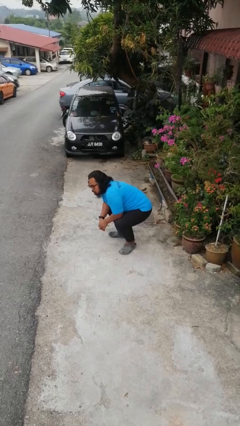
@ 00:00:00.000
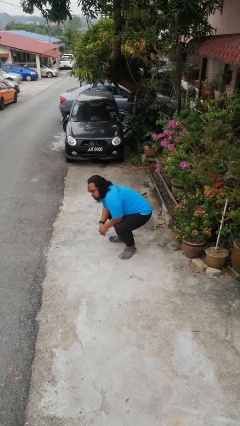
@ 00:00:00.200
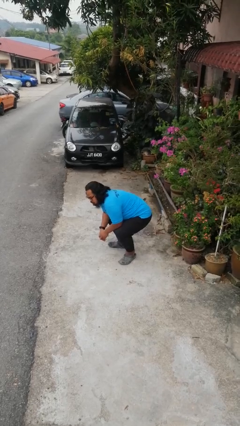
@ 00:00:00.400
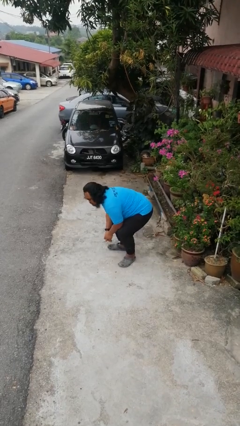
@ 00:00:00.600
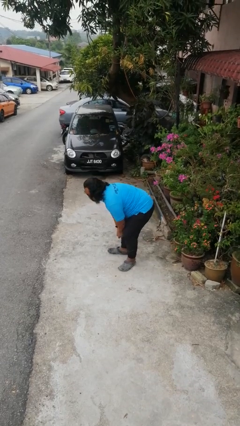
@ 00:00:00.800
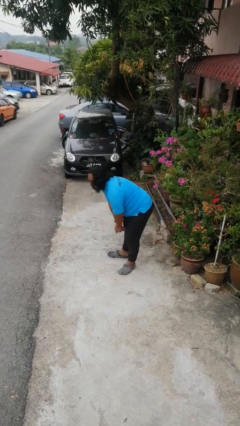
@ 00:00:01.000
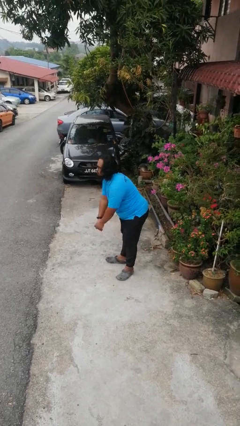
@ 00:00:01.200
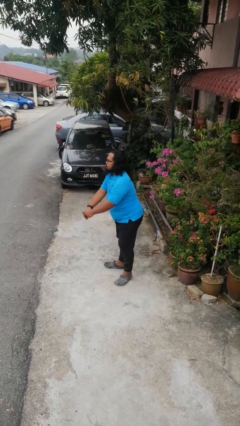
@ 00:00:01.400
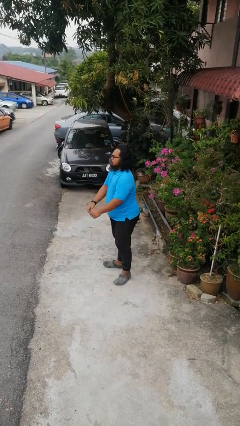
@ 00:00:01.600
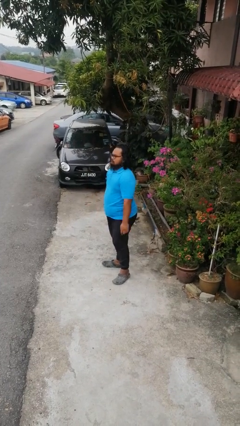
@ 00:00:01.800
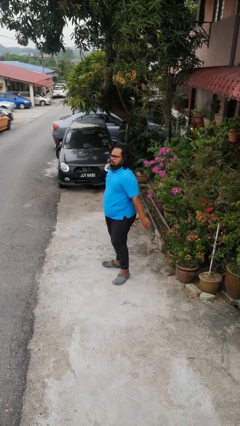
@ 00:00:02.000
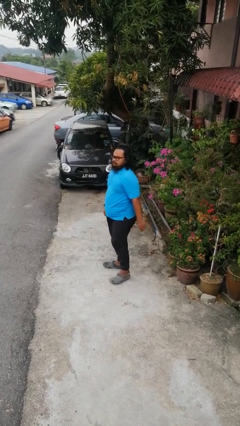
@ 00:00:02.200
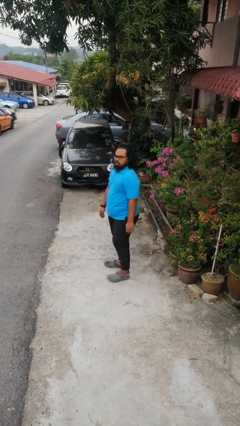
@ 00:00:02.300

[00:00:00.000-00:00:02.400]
person stands up

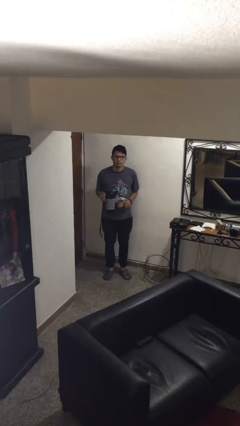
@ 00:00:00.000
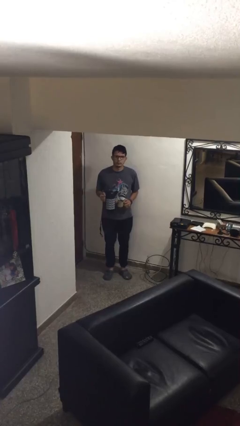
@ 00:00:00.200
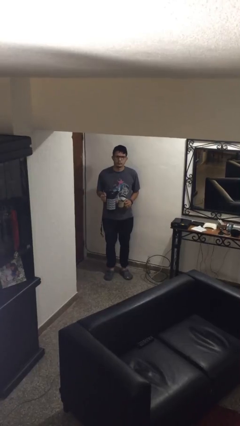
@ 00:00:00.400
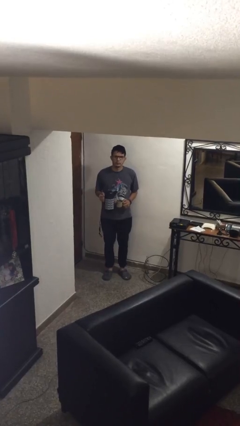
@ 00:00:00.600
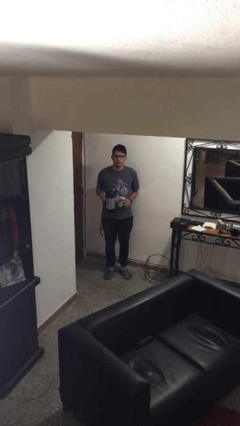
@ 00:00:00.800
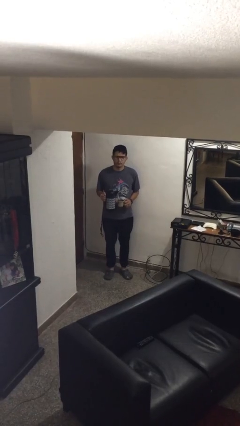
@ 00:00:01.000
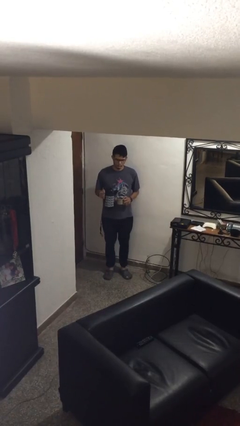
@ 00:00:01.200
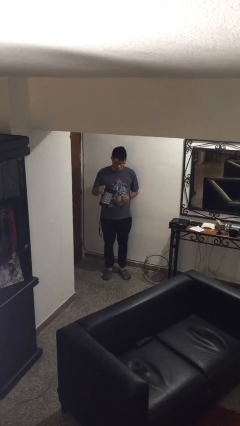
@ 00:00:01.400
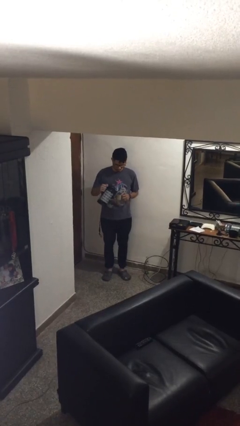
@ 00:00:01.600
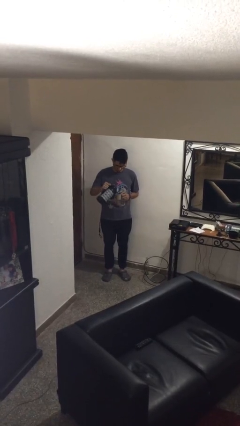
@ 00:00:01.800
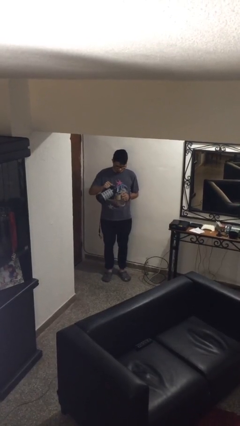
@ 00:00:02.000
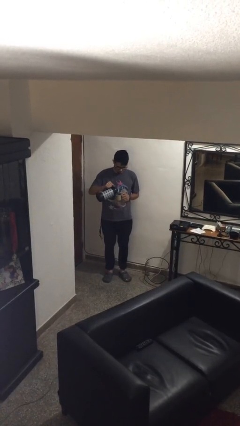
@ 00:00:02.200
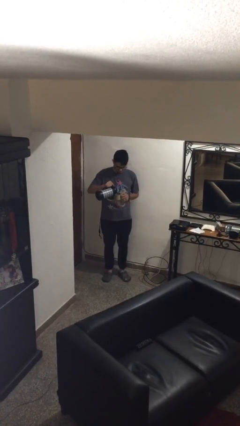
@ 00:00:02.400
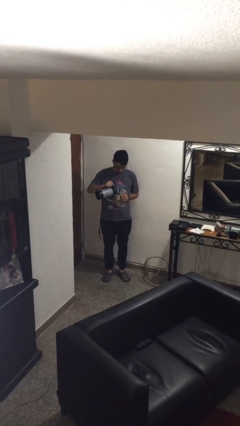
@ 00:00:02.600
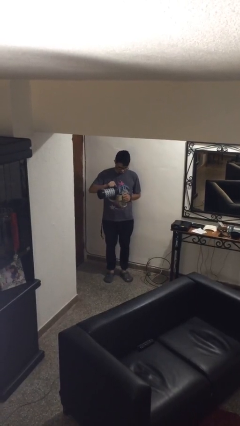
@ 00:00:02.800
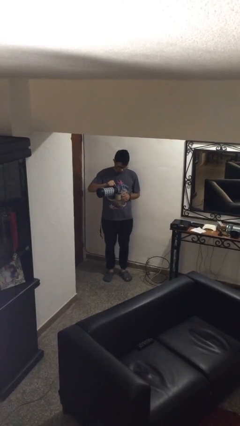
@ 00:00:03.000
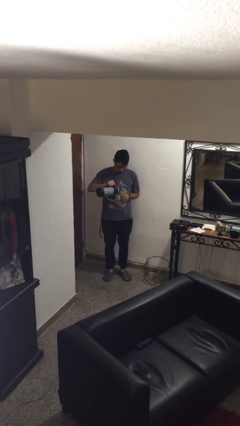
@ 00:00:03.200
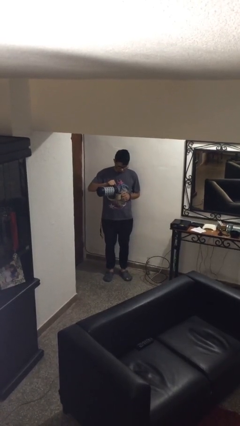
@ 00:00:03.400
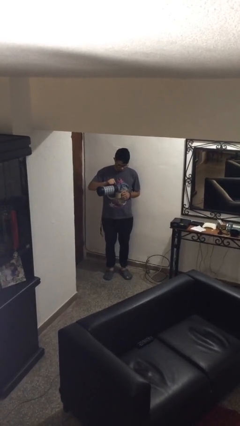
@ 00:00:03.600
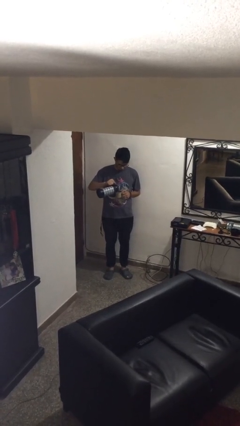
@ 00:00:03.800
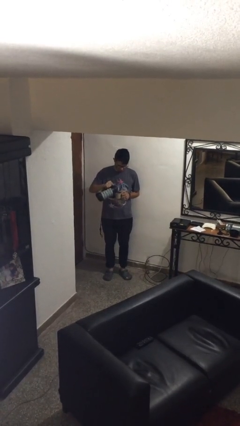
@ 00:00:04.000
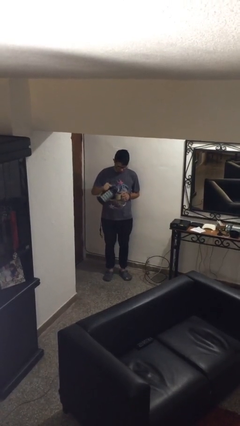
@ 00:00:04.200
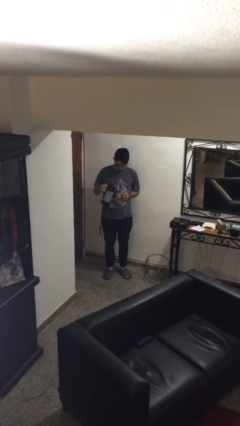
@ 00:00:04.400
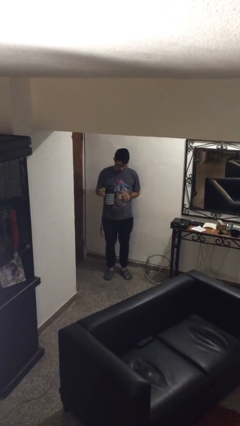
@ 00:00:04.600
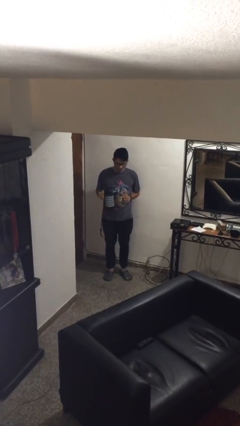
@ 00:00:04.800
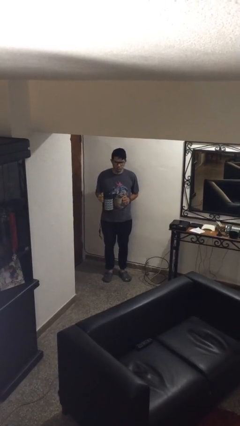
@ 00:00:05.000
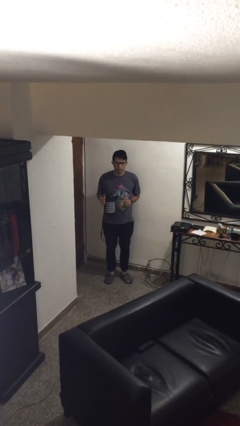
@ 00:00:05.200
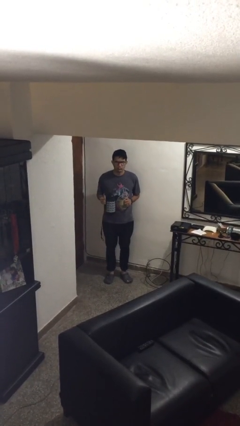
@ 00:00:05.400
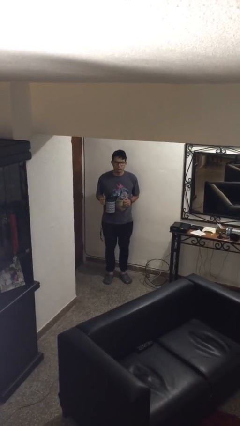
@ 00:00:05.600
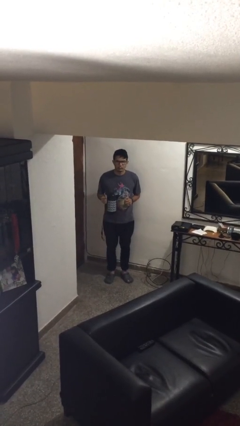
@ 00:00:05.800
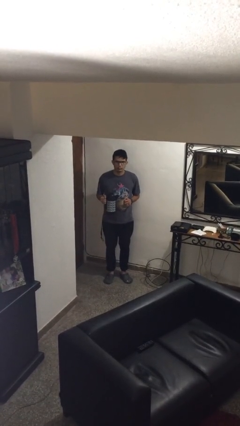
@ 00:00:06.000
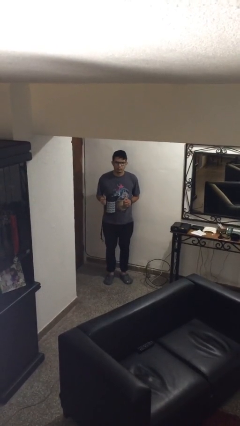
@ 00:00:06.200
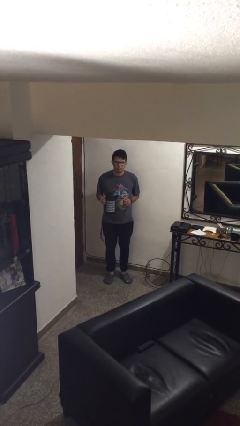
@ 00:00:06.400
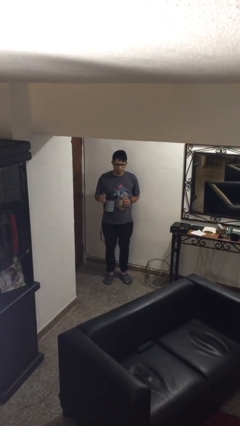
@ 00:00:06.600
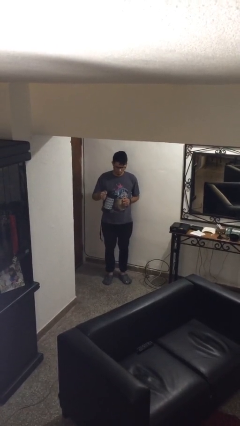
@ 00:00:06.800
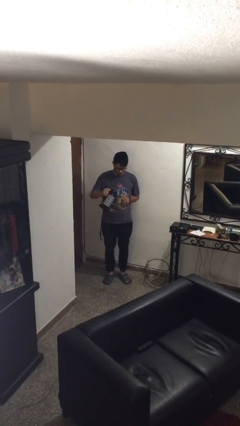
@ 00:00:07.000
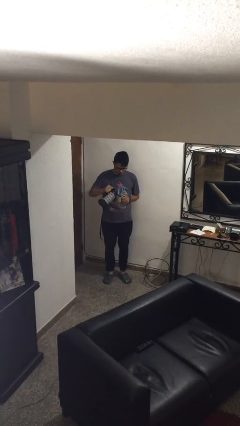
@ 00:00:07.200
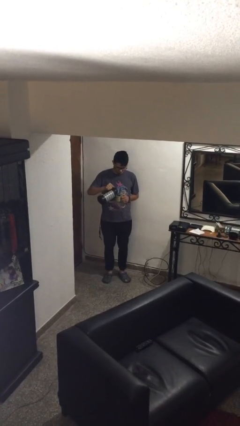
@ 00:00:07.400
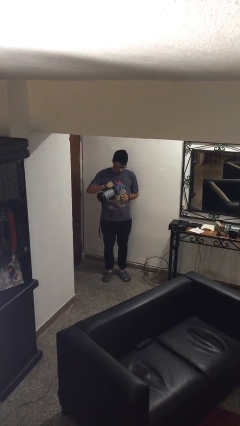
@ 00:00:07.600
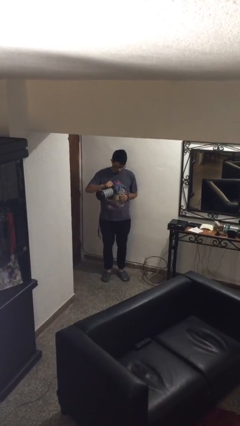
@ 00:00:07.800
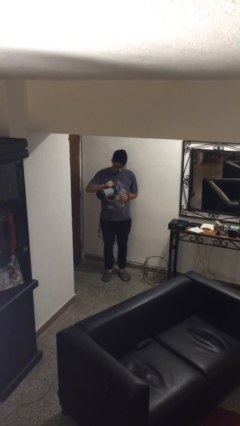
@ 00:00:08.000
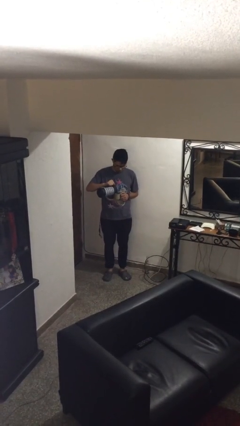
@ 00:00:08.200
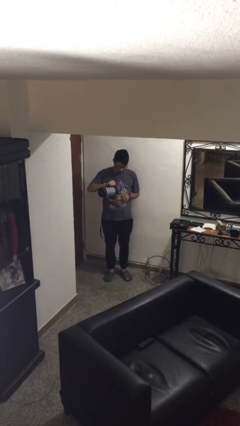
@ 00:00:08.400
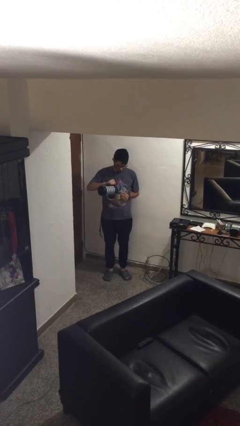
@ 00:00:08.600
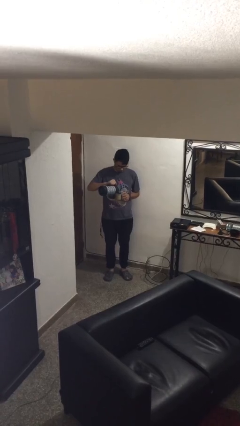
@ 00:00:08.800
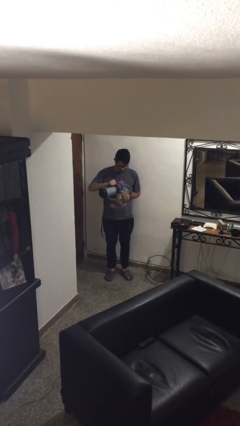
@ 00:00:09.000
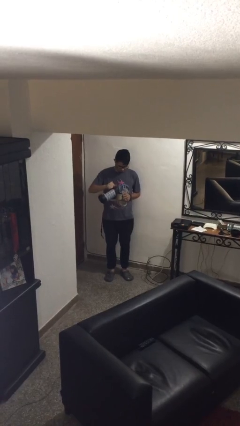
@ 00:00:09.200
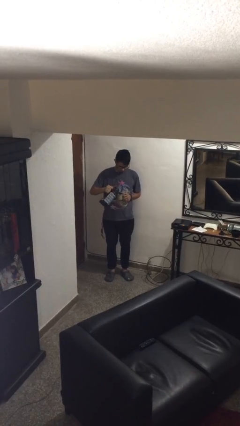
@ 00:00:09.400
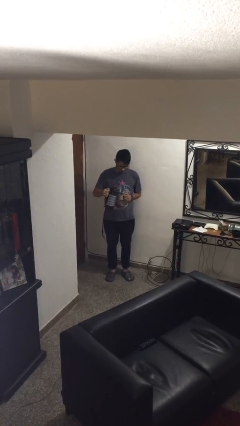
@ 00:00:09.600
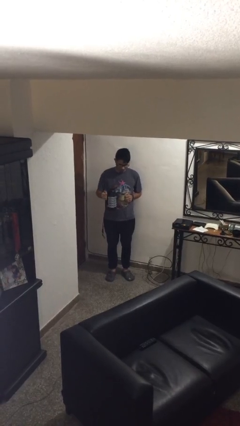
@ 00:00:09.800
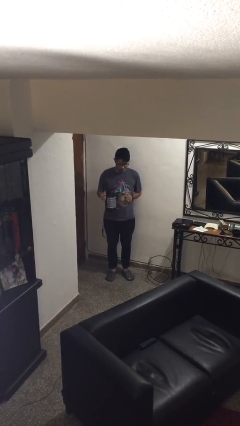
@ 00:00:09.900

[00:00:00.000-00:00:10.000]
person pours coffee into mug

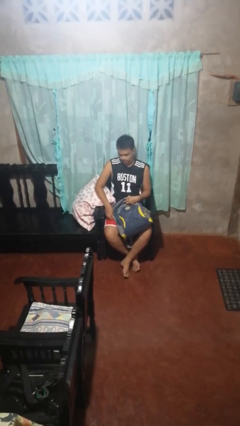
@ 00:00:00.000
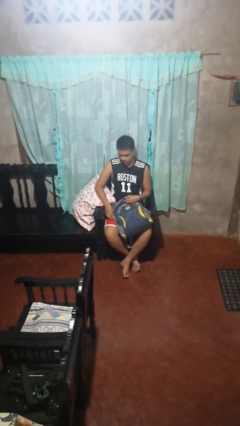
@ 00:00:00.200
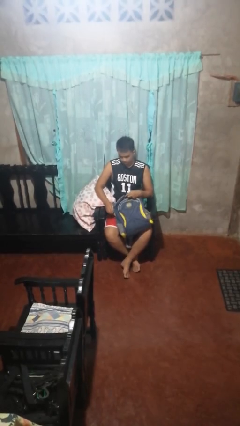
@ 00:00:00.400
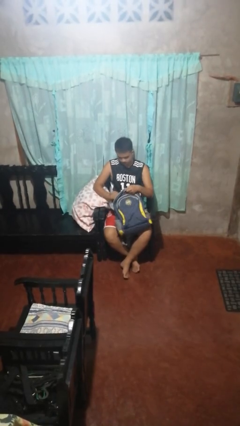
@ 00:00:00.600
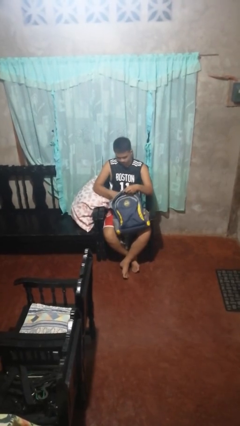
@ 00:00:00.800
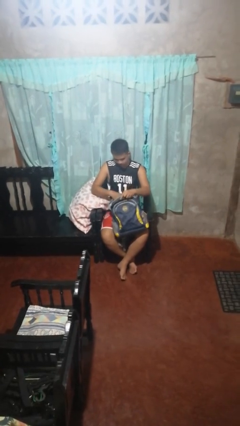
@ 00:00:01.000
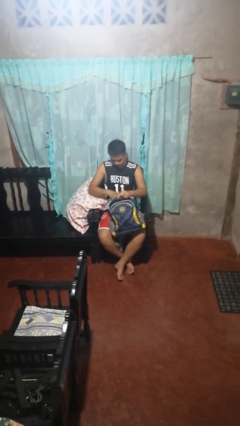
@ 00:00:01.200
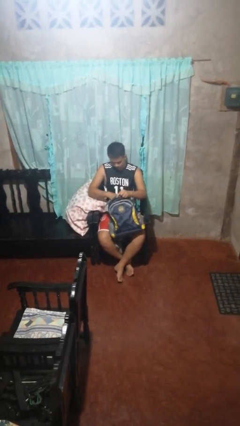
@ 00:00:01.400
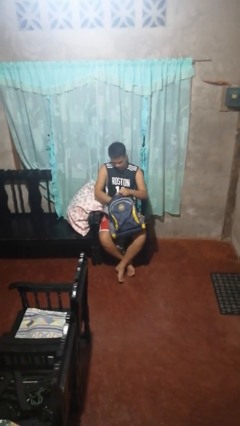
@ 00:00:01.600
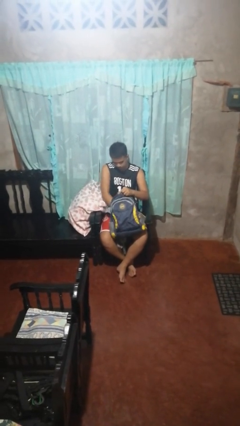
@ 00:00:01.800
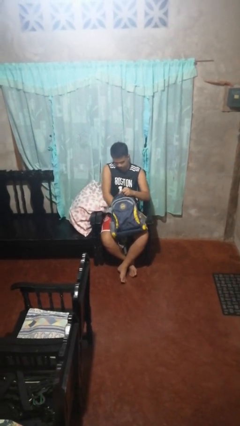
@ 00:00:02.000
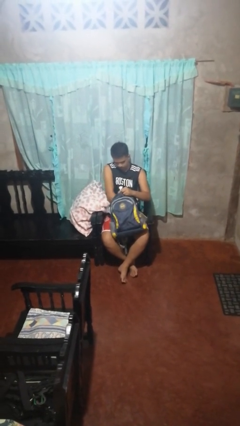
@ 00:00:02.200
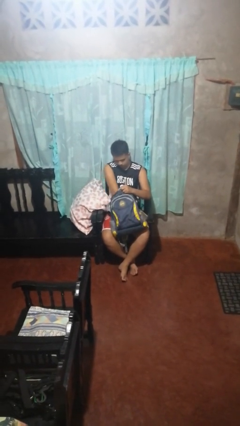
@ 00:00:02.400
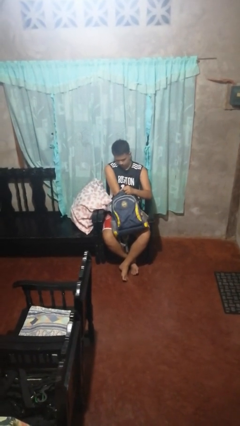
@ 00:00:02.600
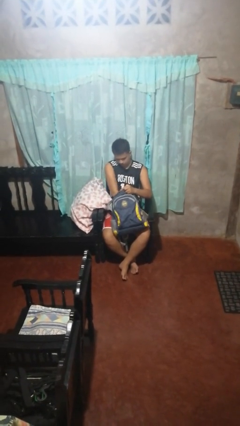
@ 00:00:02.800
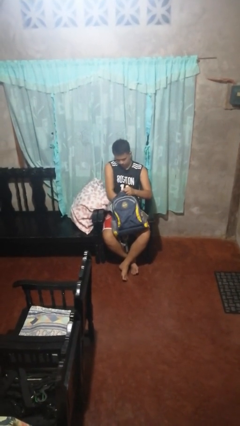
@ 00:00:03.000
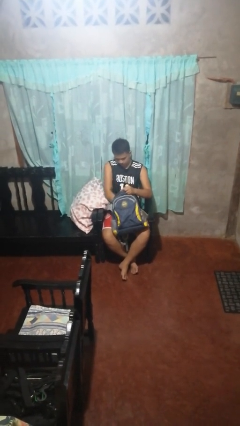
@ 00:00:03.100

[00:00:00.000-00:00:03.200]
person searches in backpack

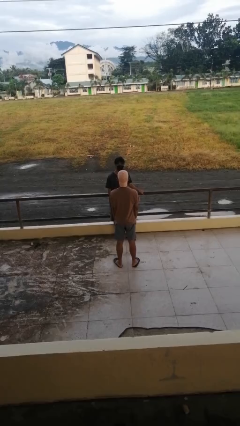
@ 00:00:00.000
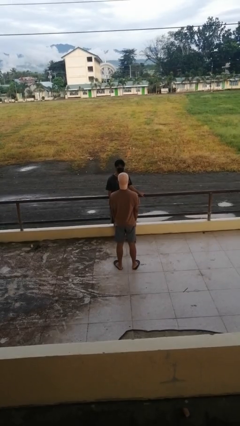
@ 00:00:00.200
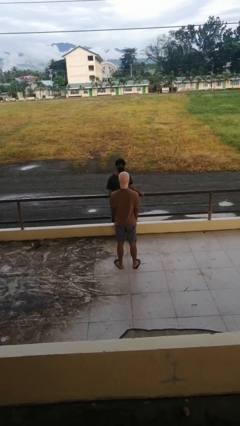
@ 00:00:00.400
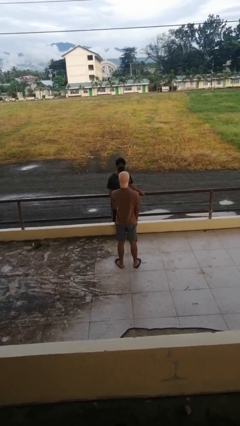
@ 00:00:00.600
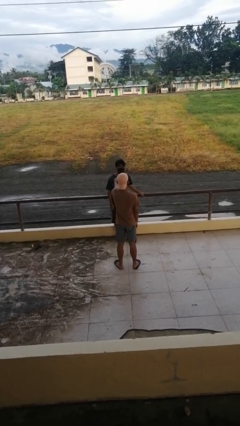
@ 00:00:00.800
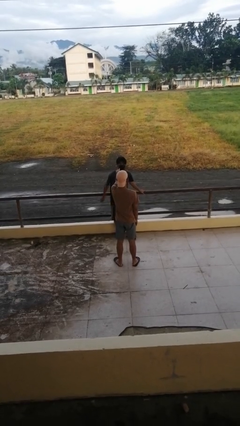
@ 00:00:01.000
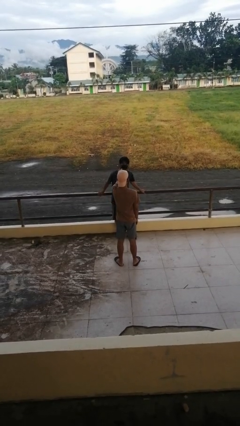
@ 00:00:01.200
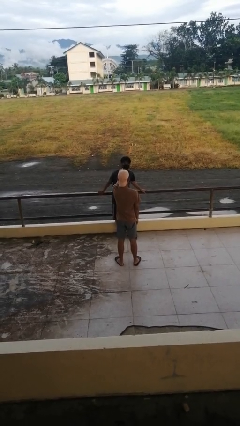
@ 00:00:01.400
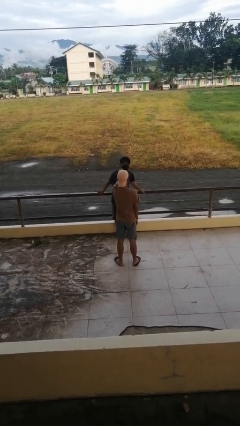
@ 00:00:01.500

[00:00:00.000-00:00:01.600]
person points at person
